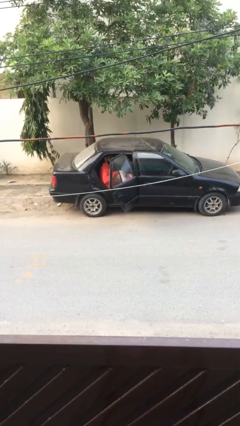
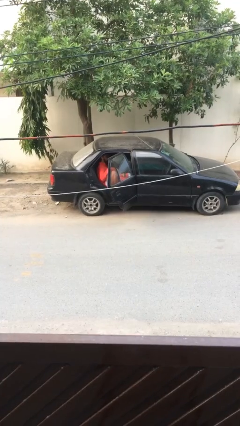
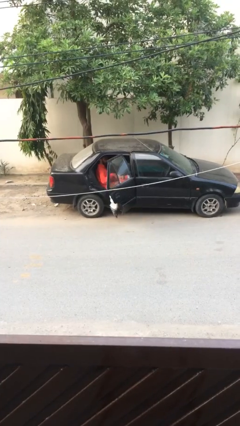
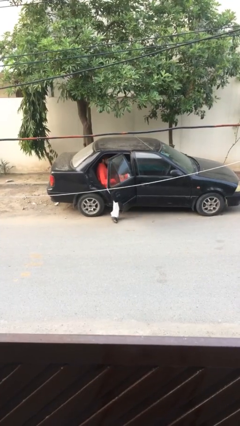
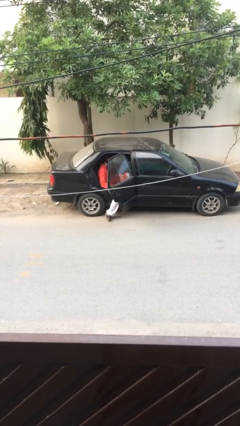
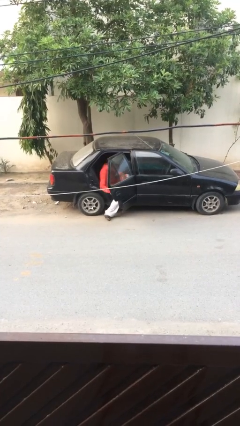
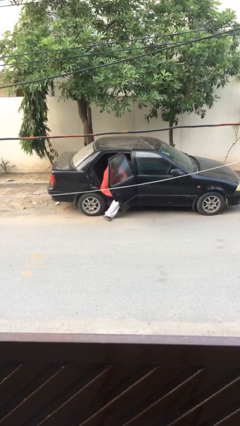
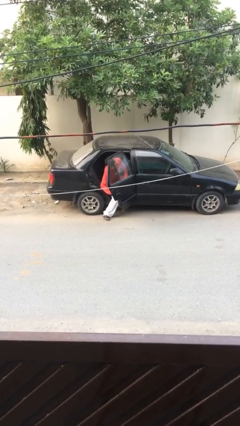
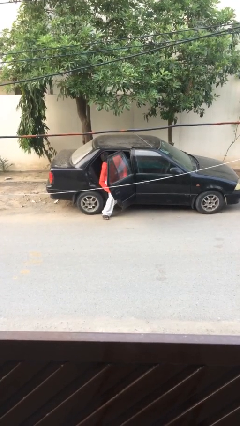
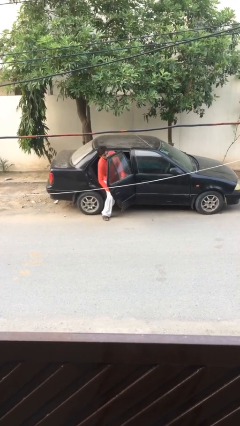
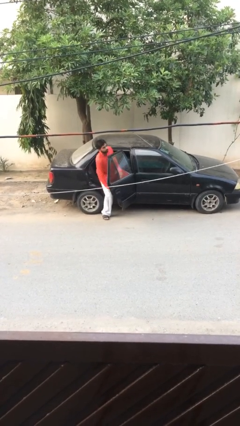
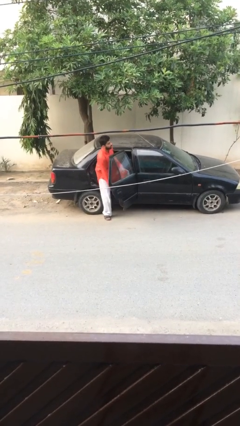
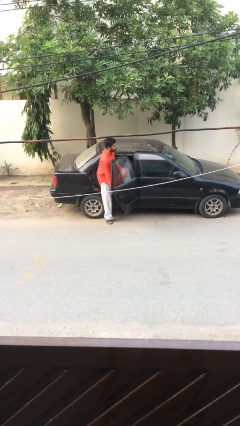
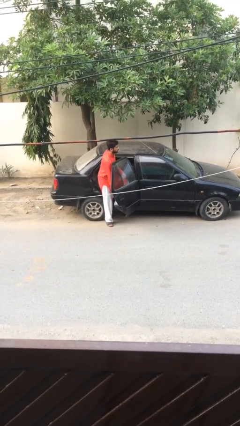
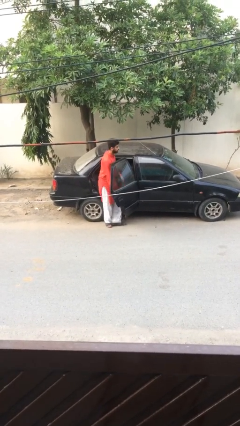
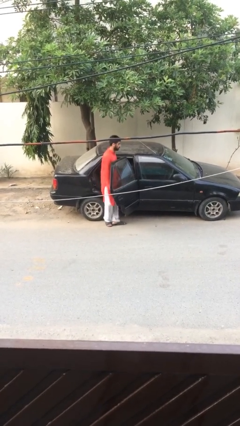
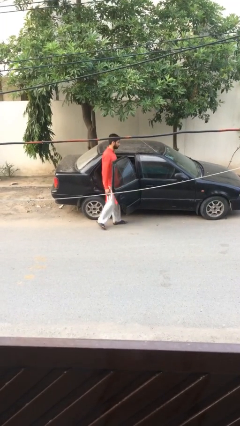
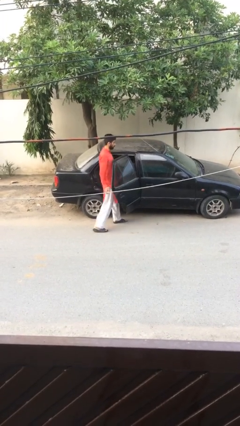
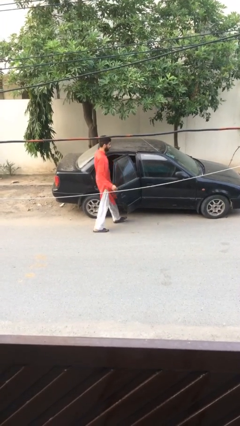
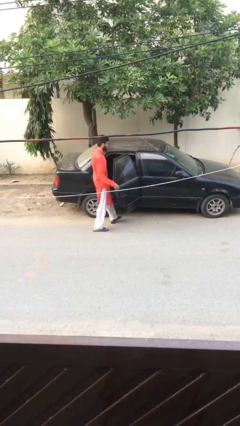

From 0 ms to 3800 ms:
person exits car

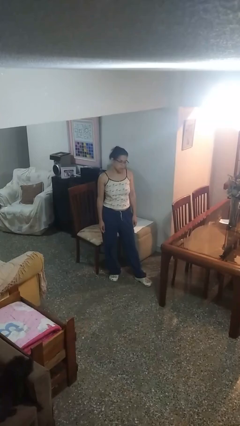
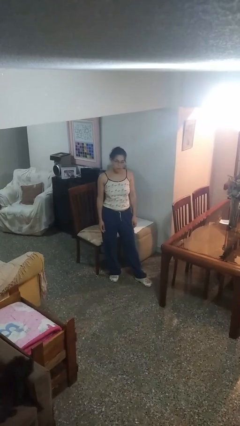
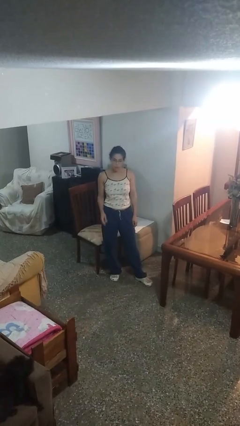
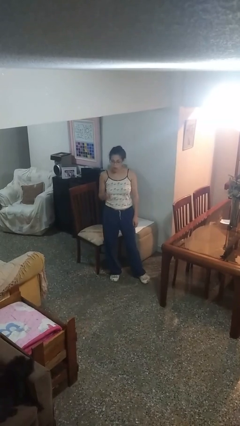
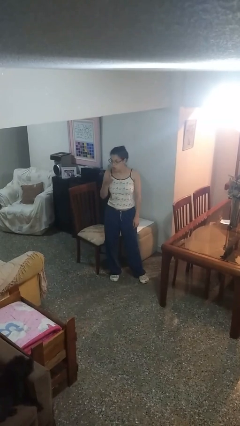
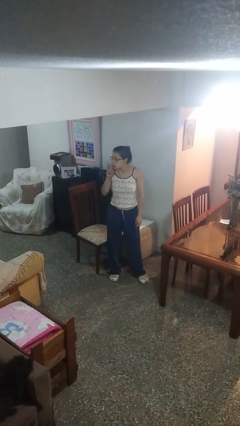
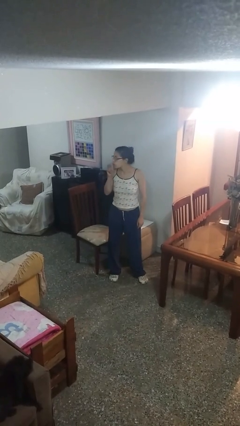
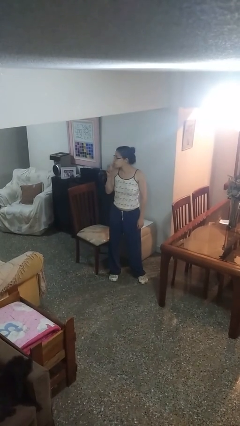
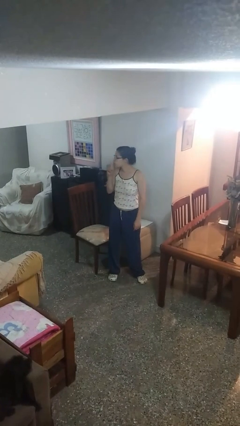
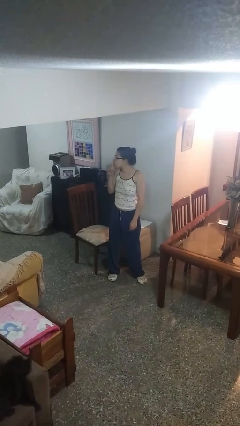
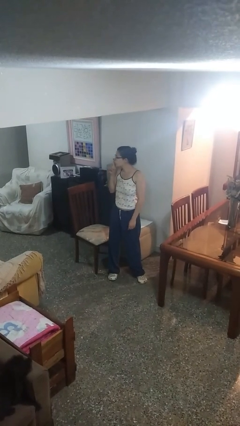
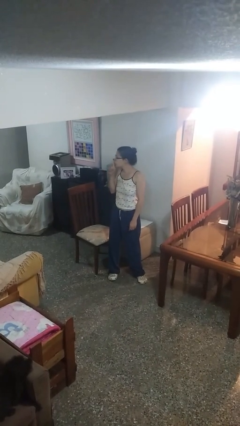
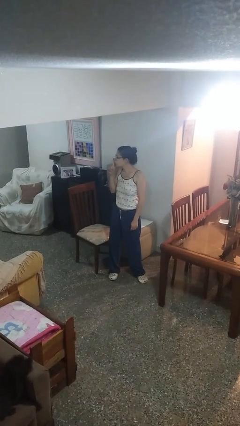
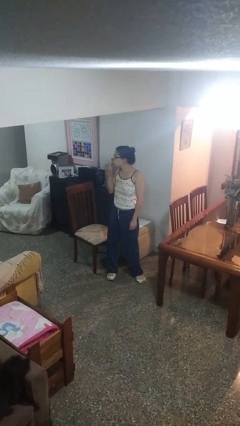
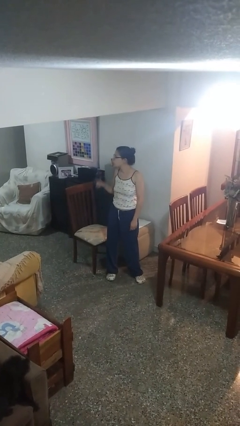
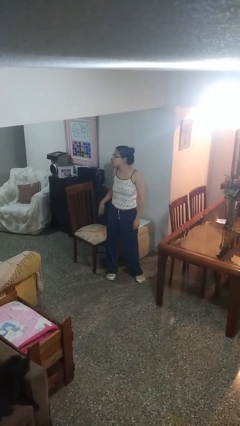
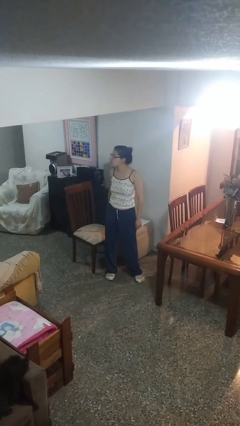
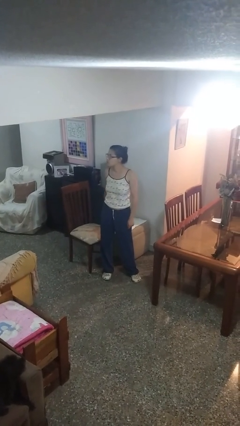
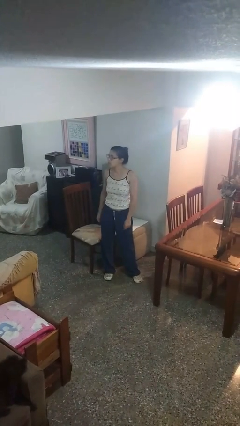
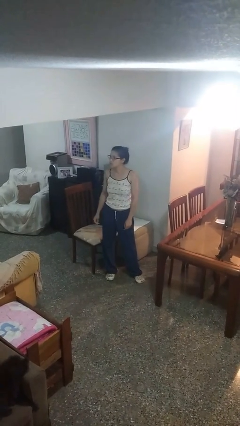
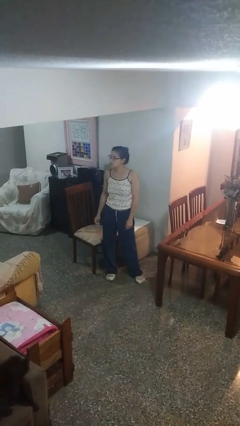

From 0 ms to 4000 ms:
person gestures be quiet

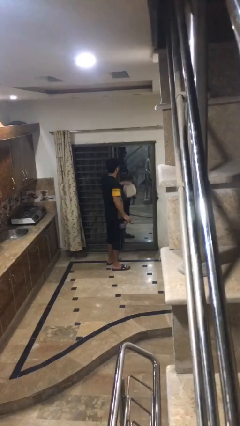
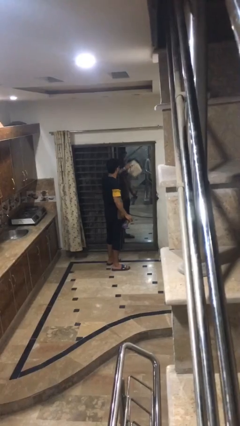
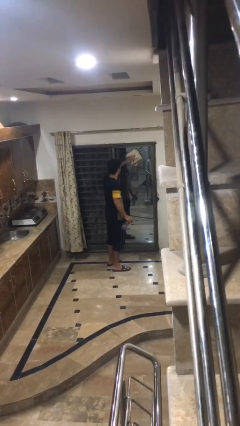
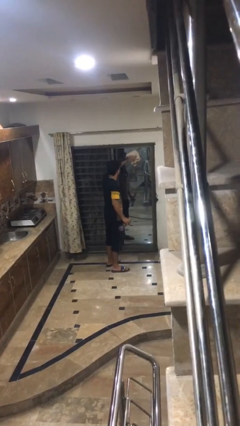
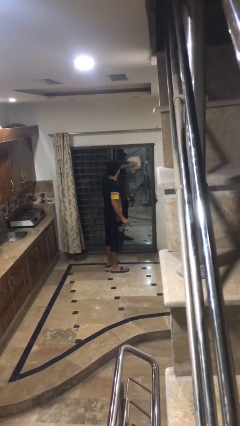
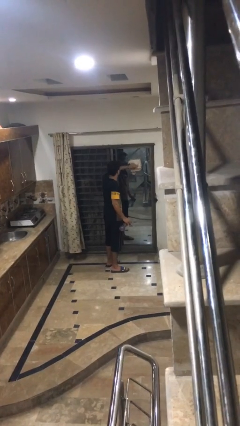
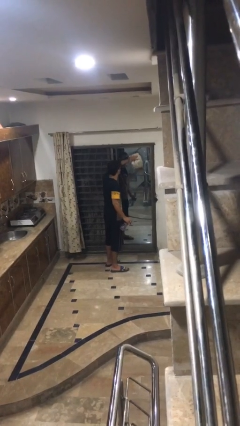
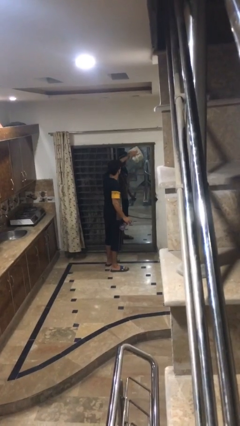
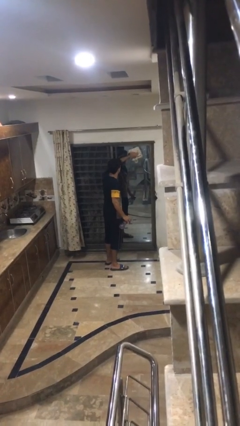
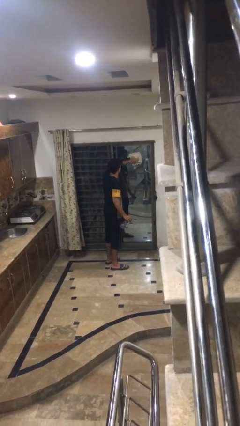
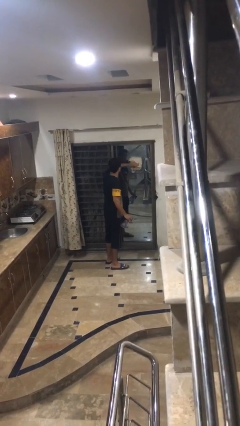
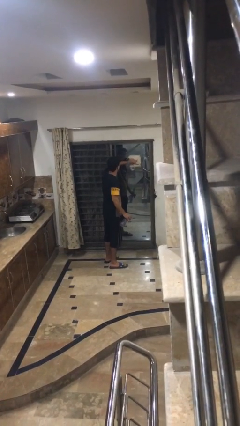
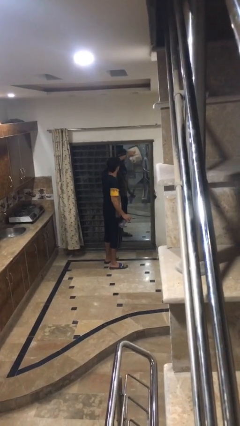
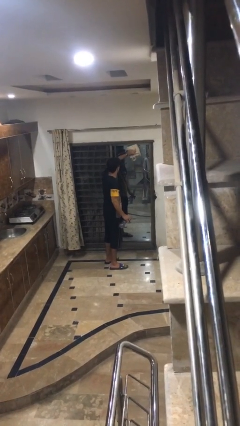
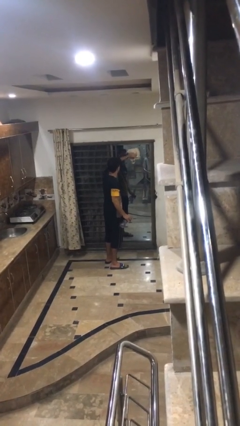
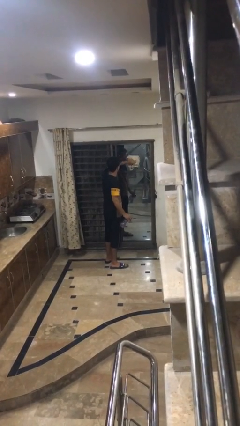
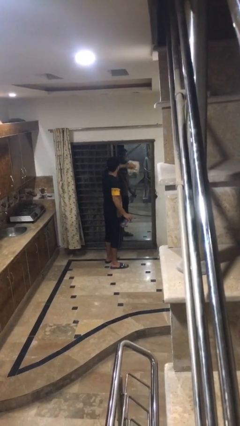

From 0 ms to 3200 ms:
person washes window

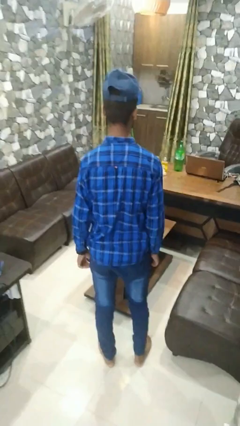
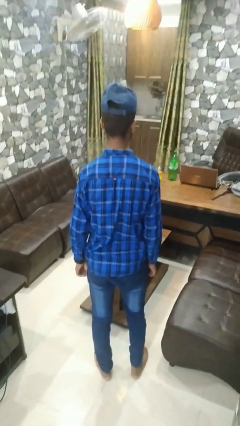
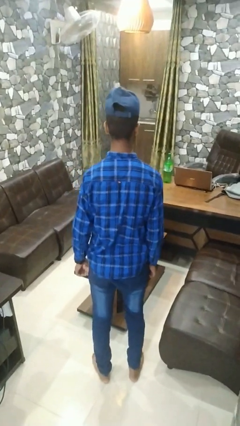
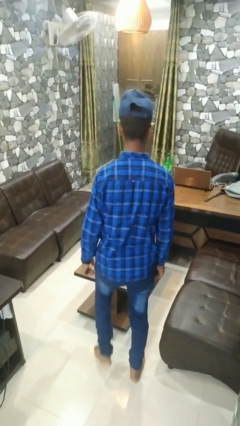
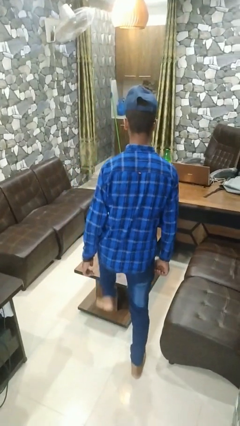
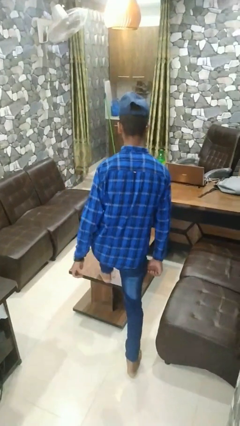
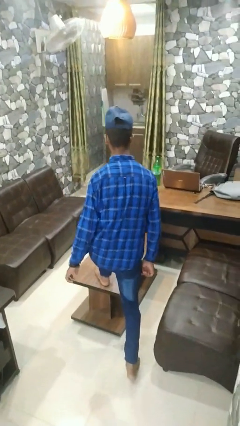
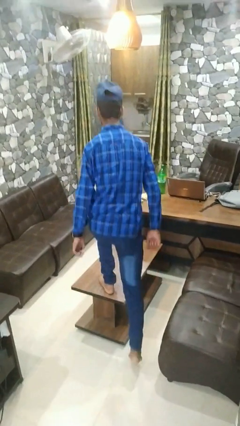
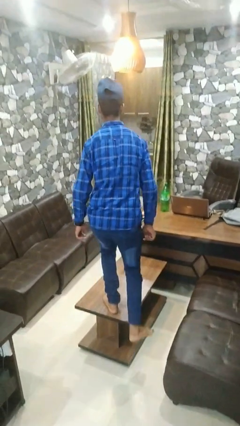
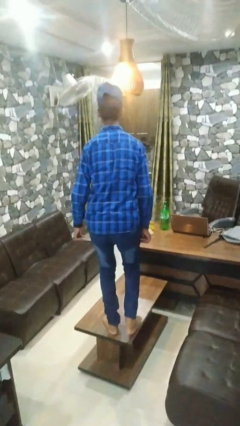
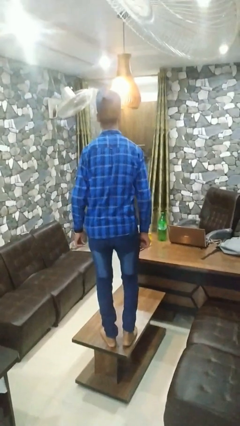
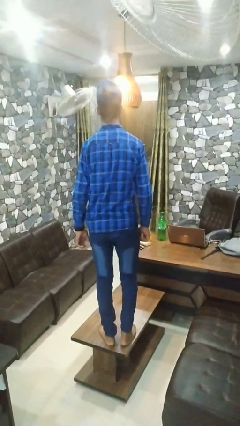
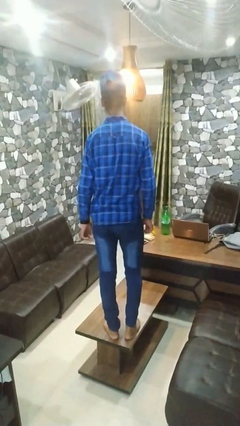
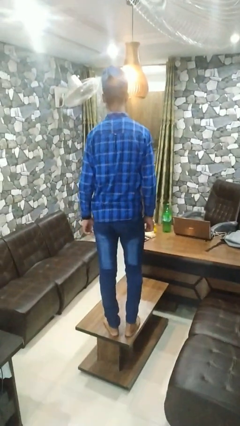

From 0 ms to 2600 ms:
person climbs on table

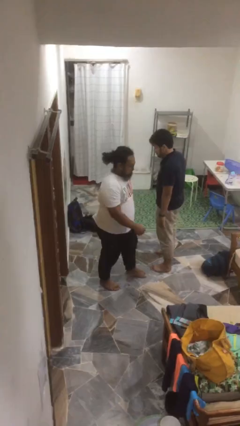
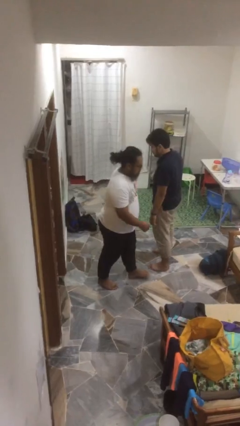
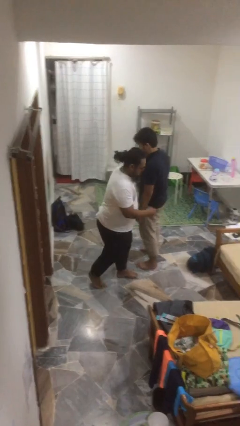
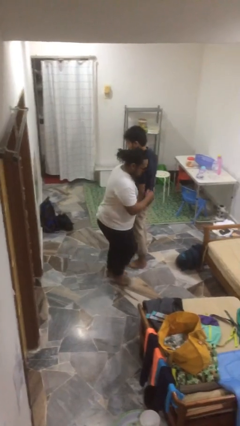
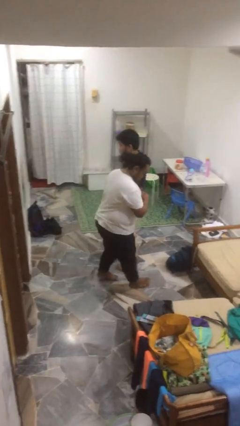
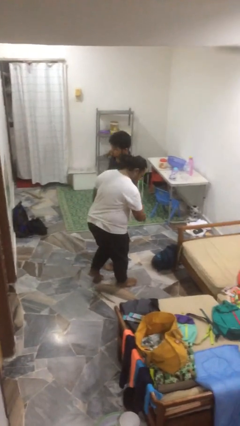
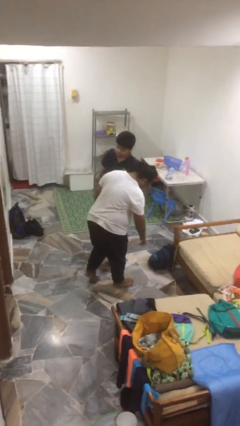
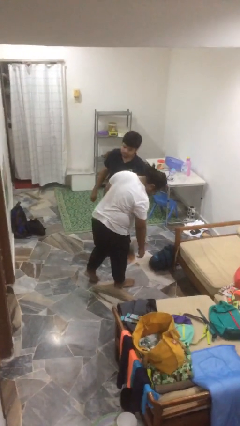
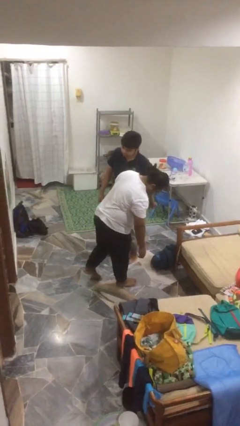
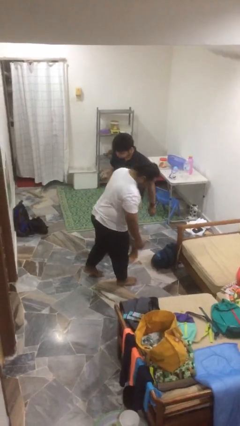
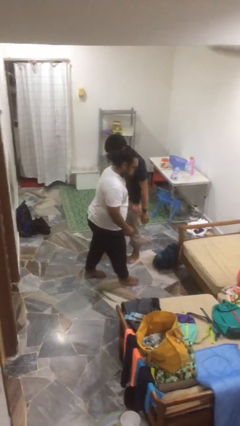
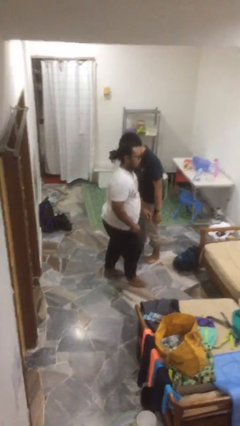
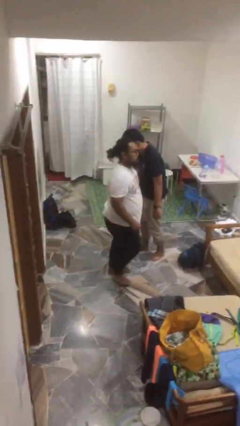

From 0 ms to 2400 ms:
person bumps into person

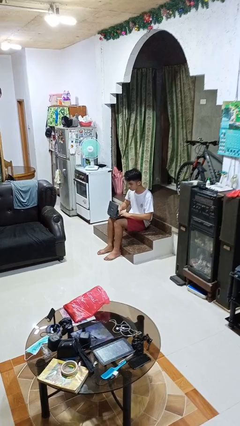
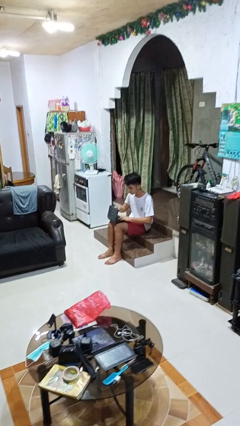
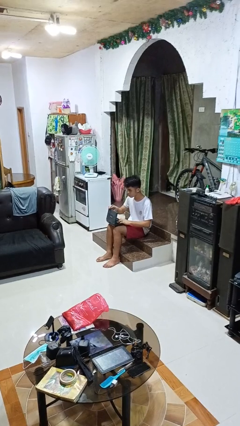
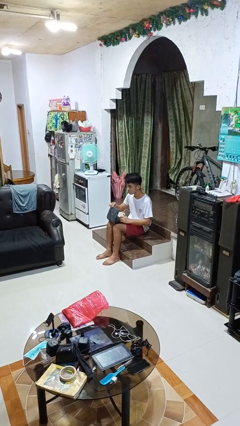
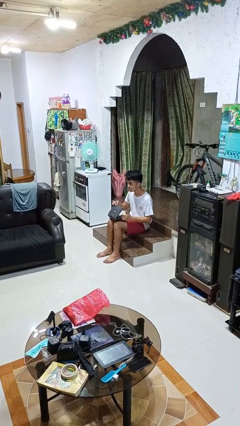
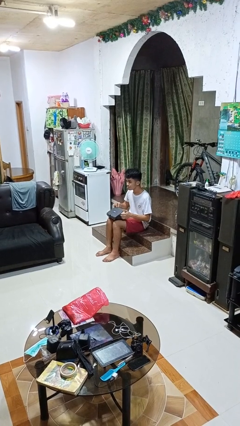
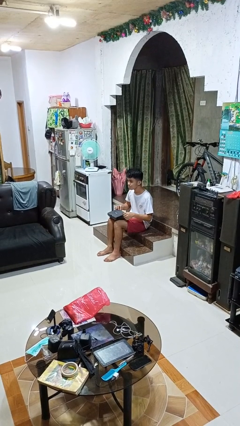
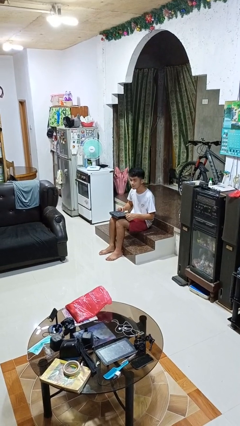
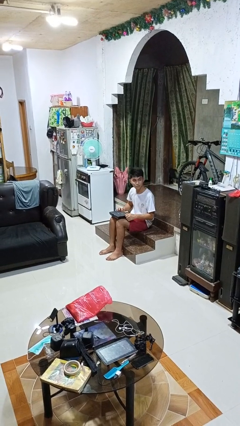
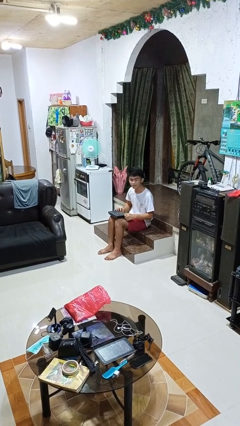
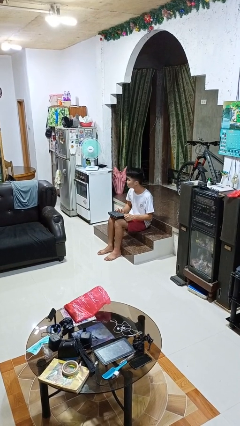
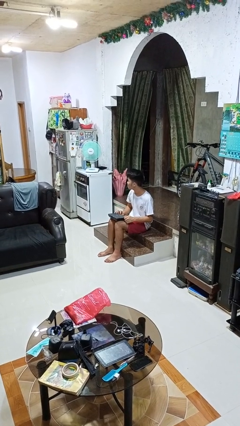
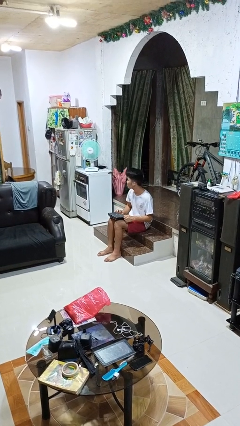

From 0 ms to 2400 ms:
person closes laptop
